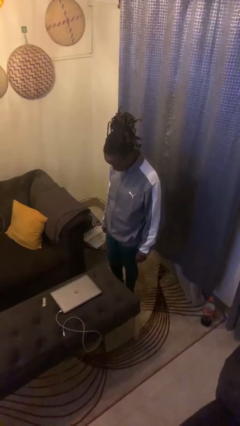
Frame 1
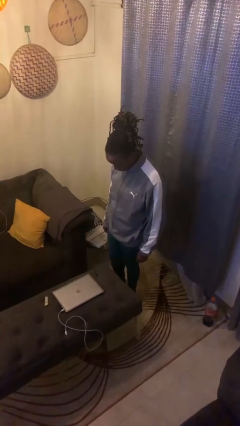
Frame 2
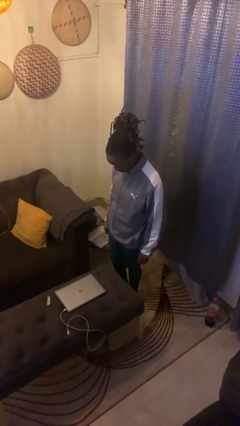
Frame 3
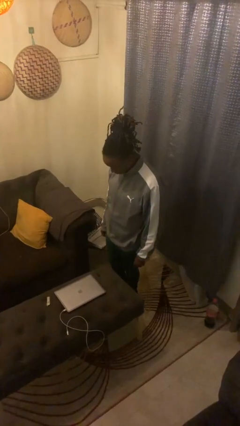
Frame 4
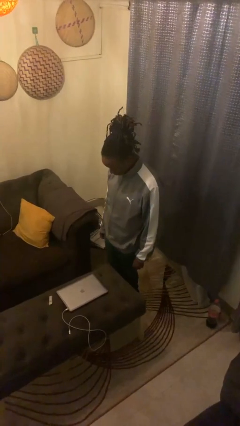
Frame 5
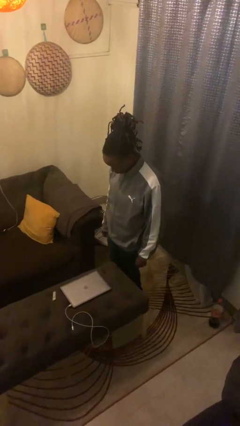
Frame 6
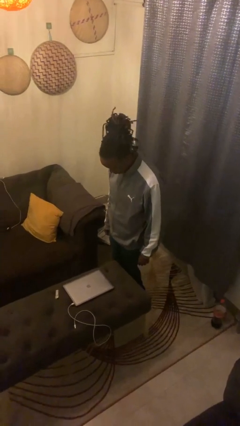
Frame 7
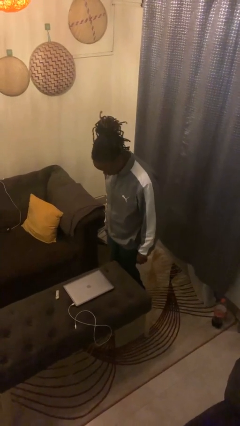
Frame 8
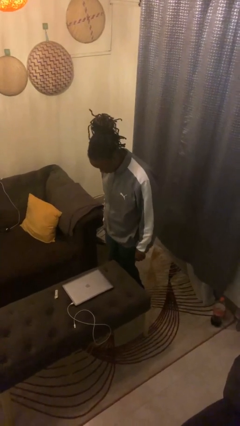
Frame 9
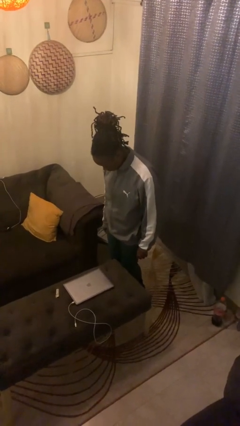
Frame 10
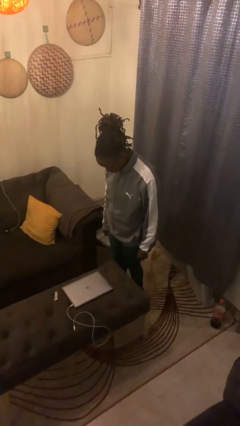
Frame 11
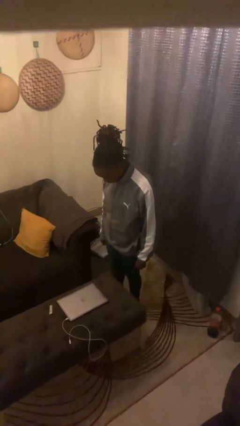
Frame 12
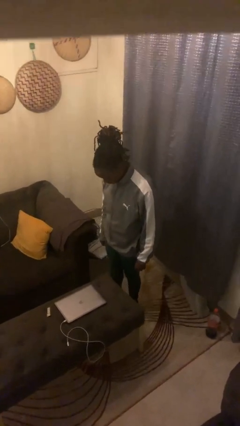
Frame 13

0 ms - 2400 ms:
person bumps into table

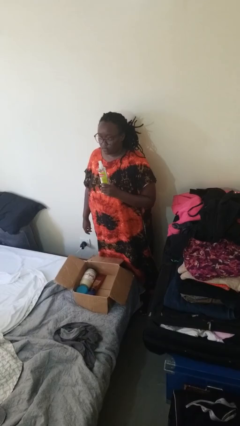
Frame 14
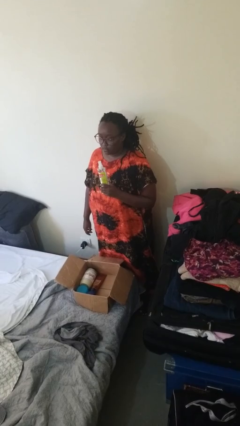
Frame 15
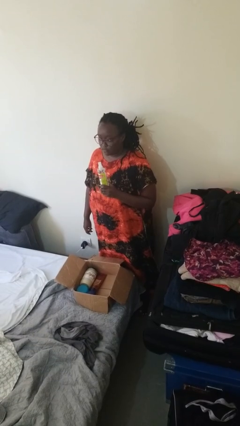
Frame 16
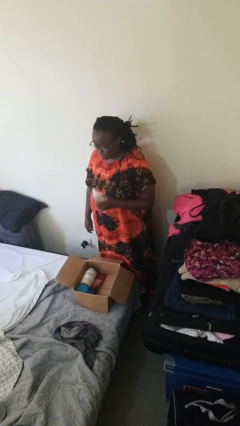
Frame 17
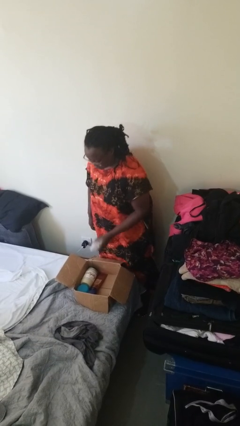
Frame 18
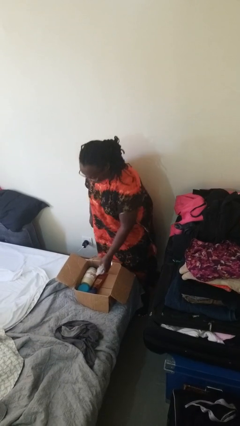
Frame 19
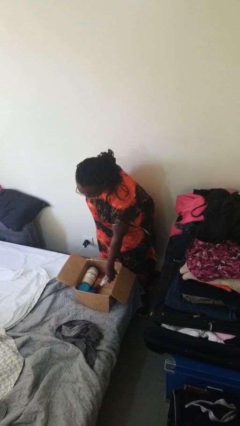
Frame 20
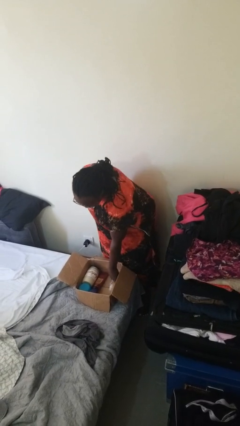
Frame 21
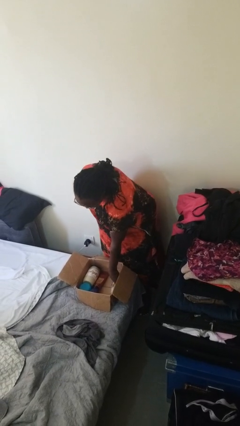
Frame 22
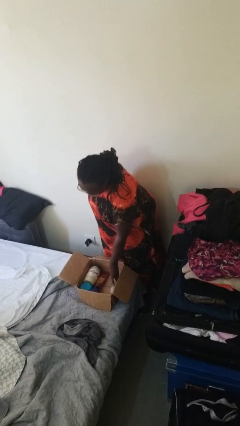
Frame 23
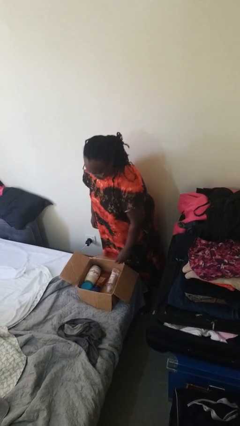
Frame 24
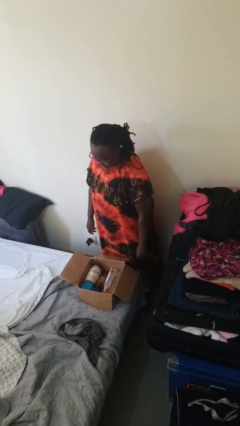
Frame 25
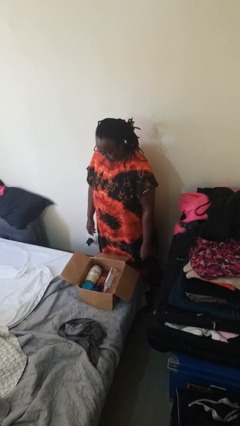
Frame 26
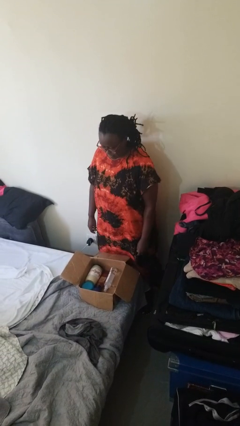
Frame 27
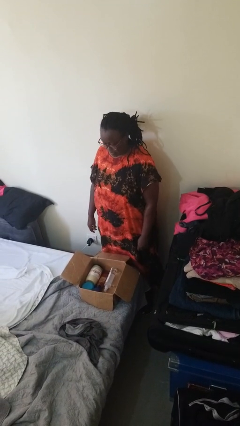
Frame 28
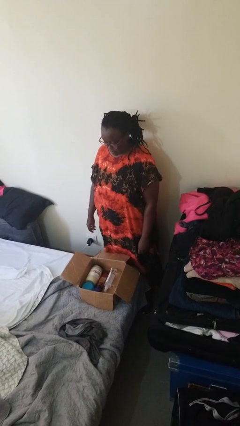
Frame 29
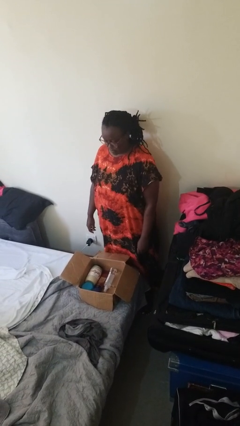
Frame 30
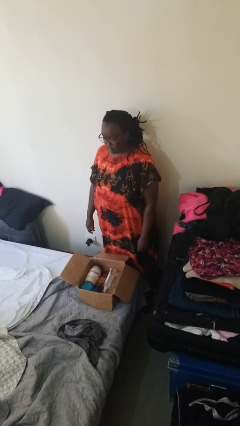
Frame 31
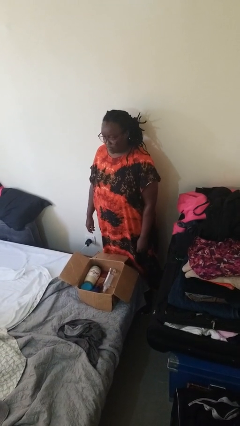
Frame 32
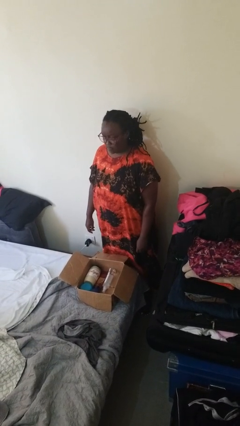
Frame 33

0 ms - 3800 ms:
person puts object into box

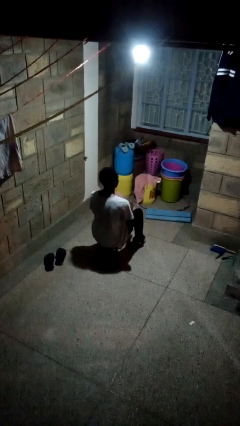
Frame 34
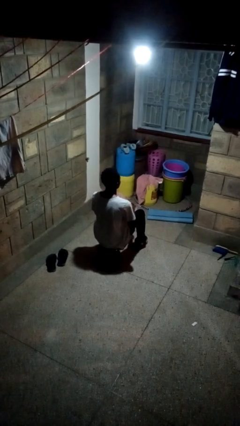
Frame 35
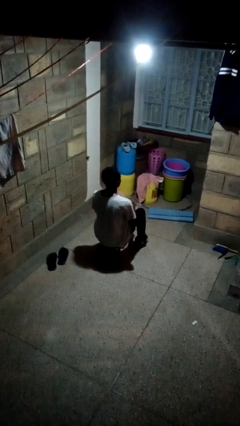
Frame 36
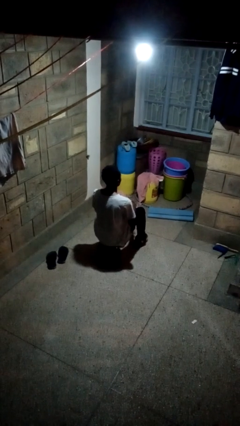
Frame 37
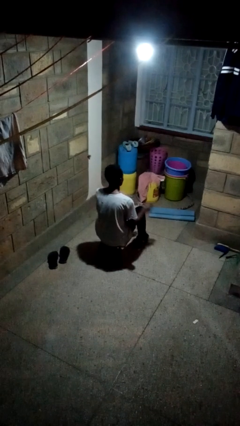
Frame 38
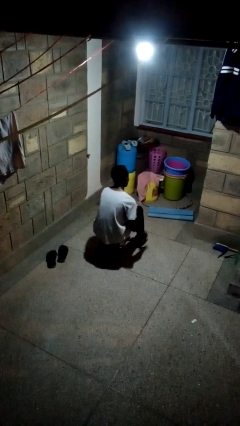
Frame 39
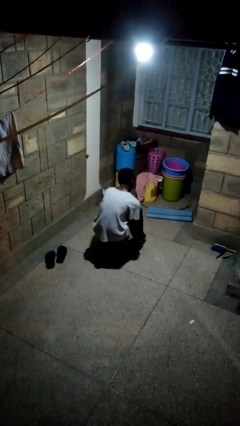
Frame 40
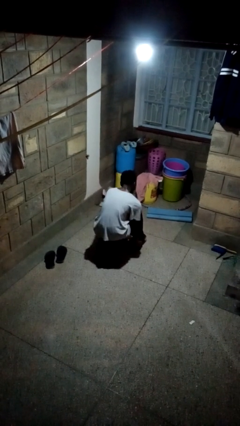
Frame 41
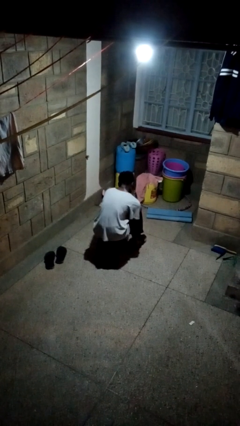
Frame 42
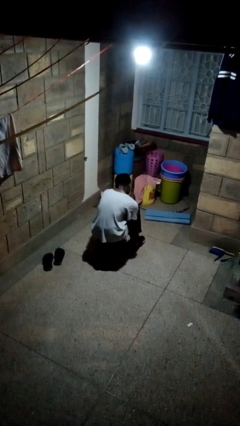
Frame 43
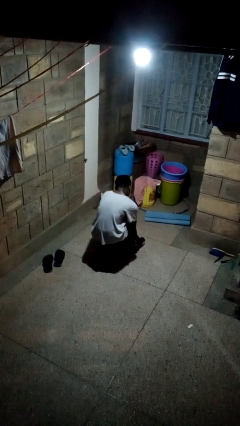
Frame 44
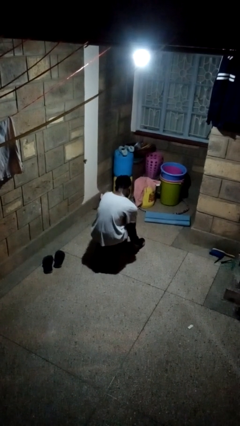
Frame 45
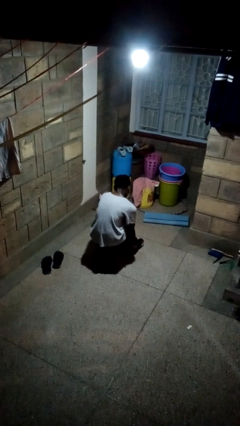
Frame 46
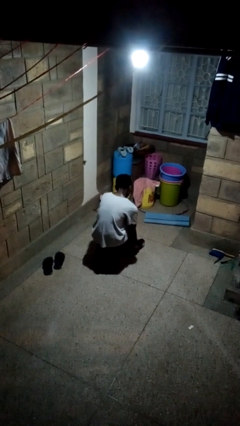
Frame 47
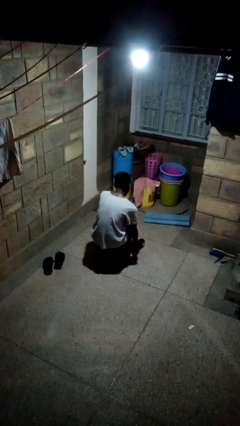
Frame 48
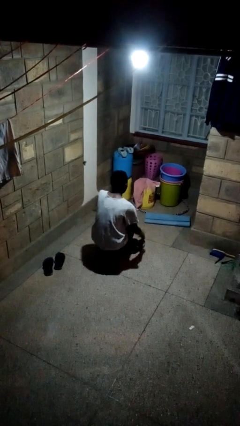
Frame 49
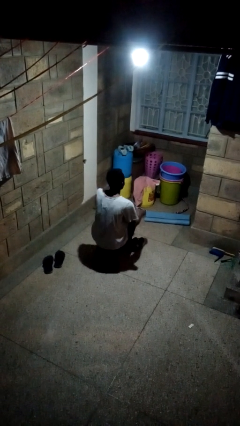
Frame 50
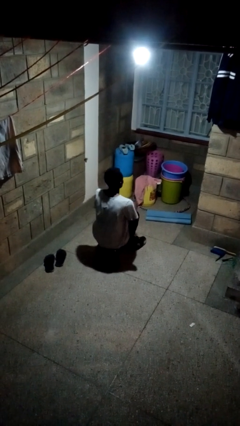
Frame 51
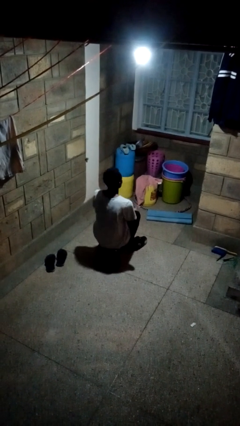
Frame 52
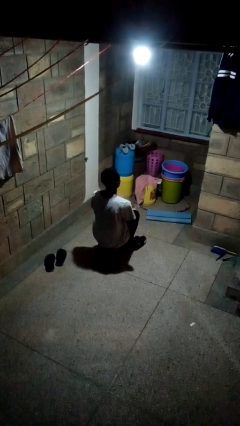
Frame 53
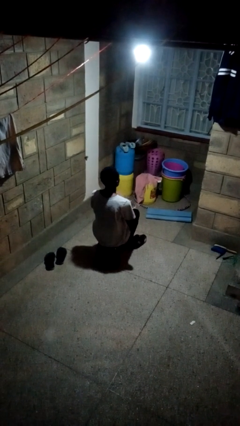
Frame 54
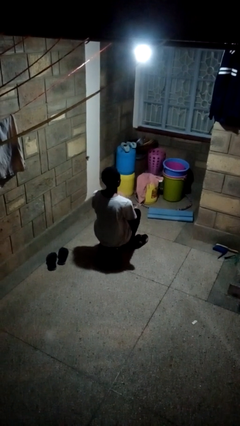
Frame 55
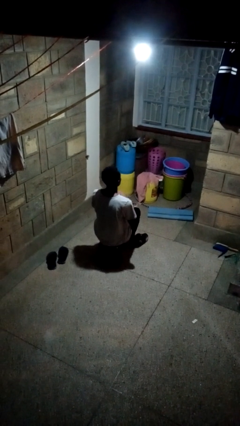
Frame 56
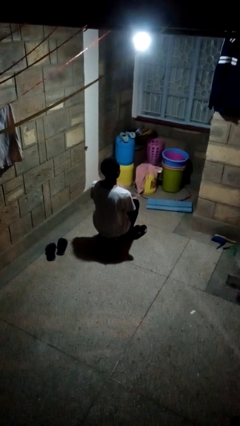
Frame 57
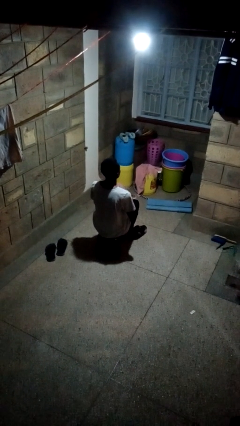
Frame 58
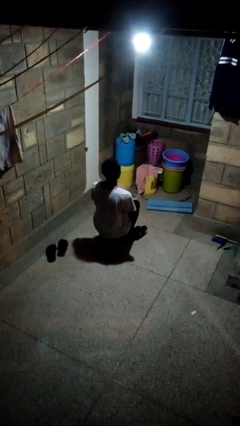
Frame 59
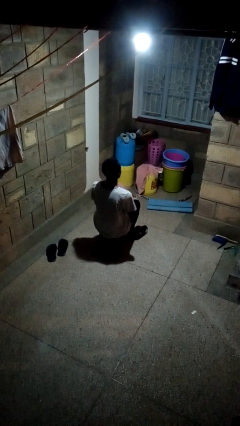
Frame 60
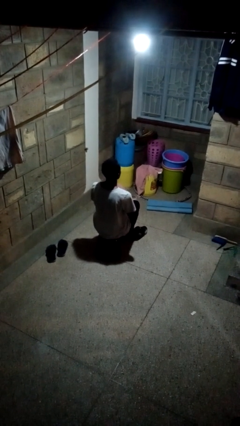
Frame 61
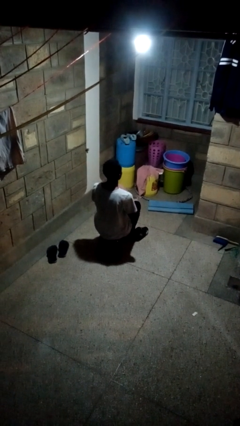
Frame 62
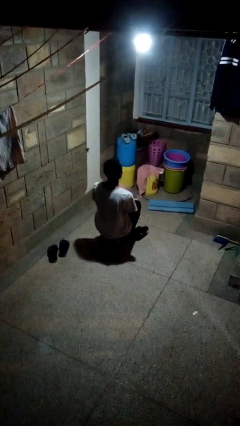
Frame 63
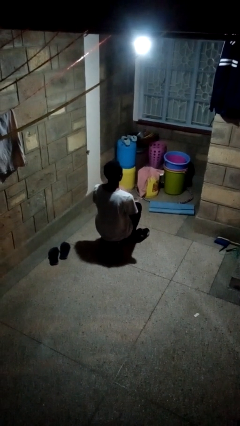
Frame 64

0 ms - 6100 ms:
person takes off shoes

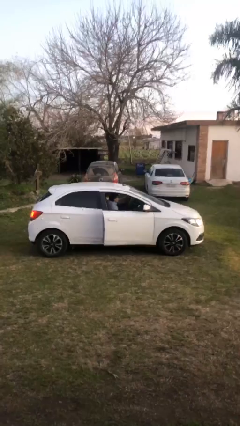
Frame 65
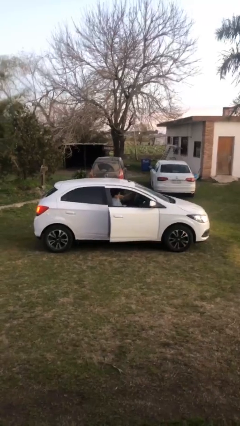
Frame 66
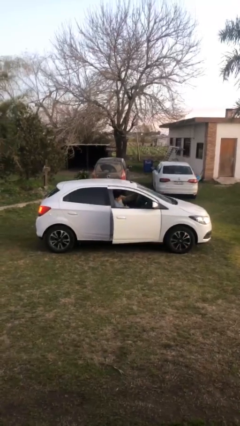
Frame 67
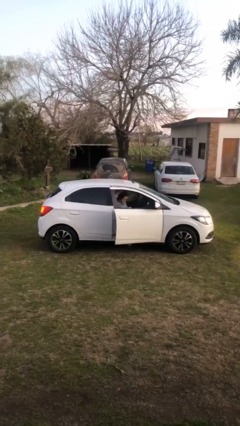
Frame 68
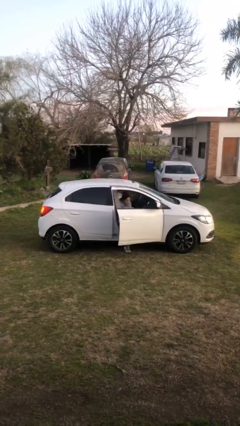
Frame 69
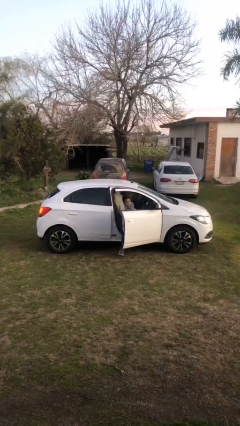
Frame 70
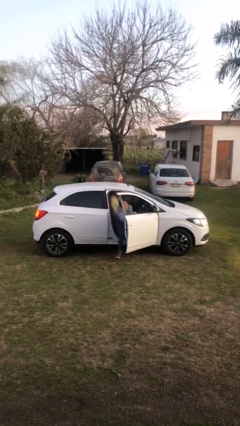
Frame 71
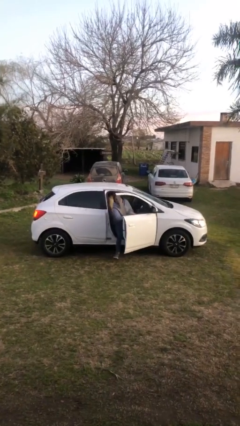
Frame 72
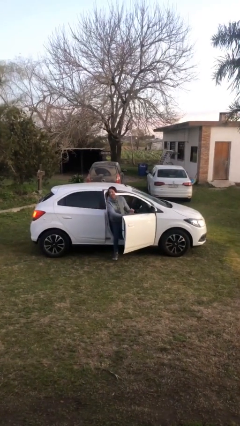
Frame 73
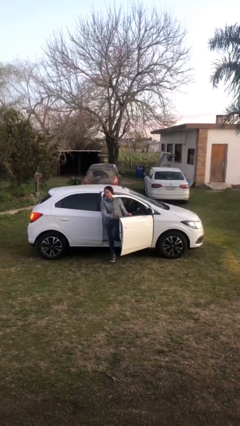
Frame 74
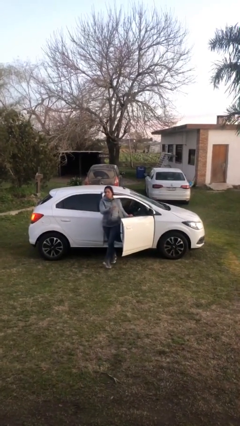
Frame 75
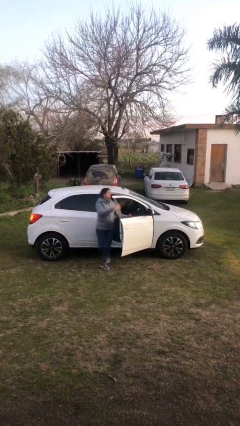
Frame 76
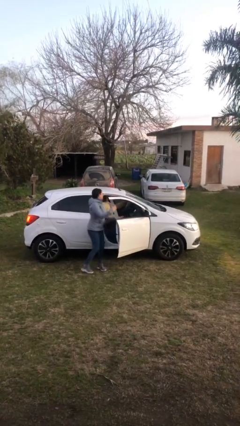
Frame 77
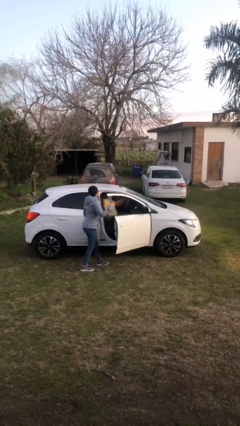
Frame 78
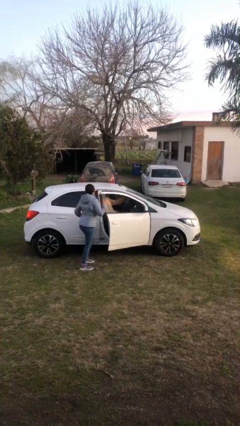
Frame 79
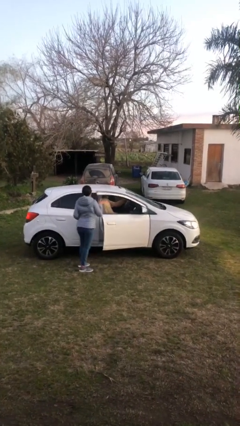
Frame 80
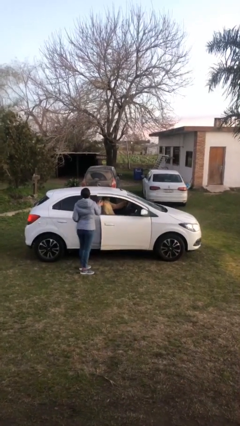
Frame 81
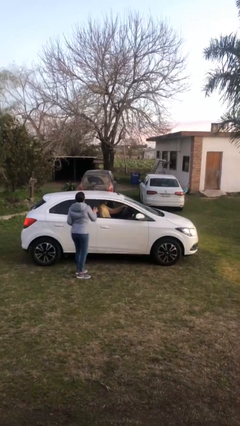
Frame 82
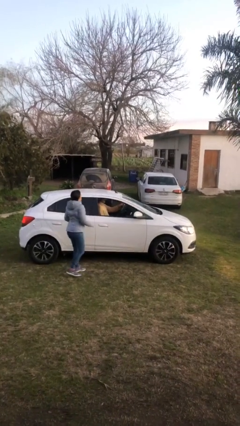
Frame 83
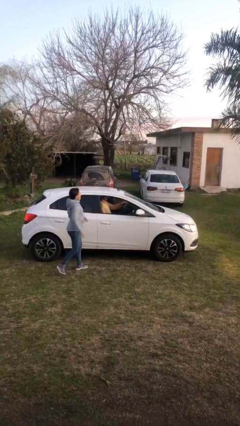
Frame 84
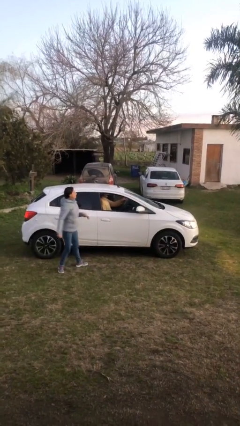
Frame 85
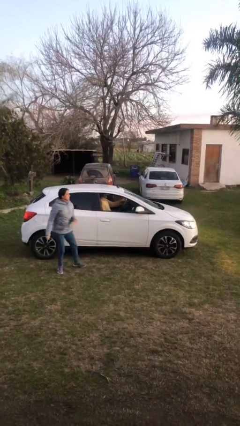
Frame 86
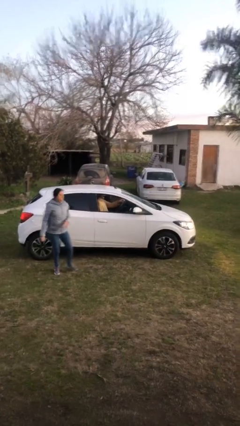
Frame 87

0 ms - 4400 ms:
car drops off person

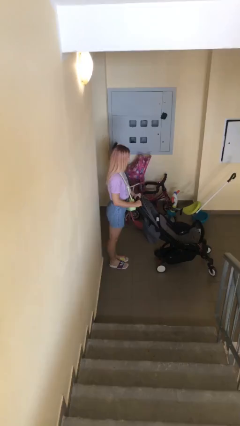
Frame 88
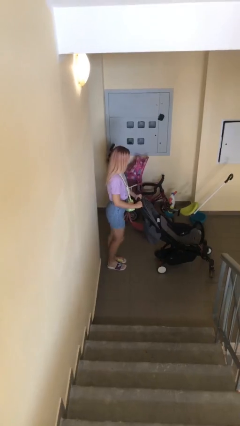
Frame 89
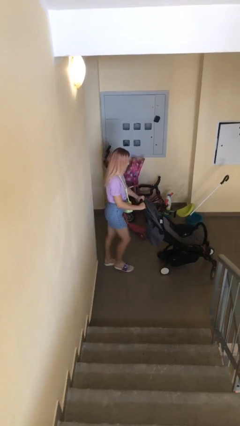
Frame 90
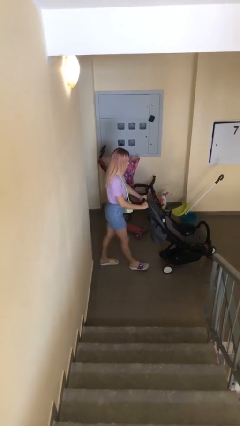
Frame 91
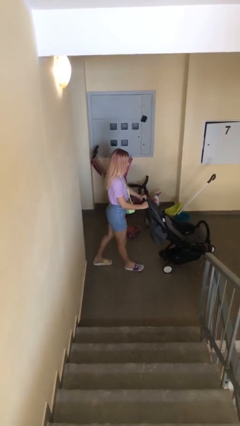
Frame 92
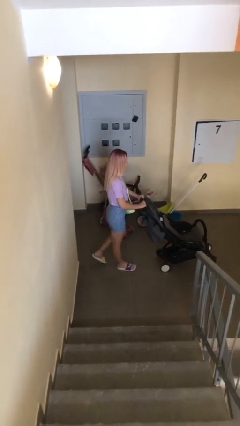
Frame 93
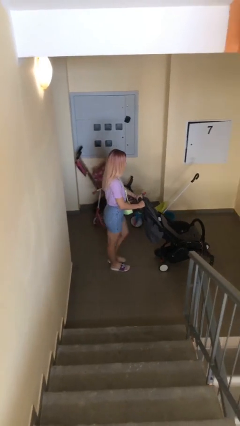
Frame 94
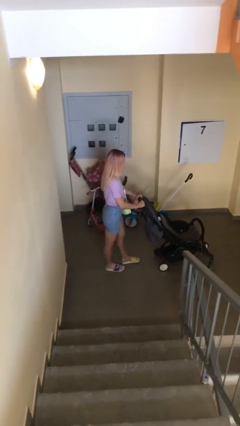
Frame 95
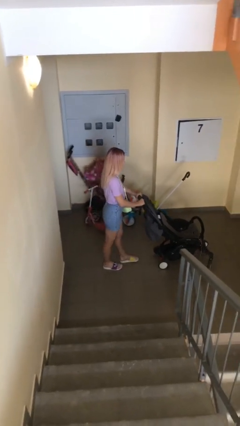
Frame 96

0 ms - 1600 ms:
person pushes wheeled cart
